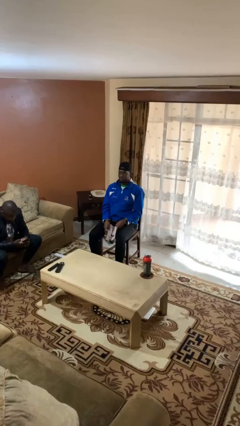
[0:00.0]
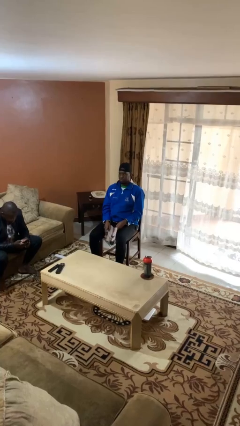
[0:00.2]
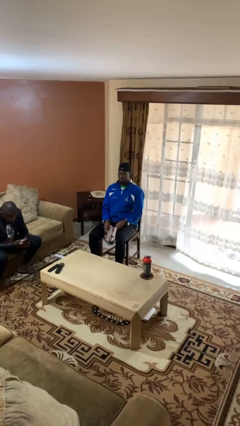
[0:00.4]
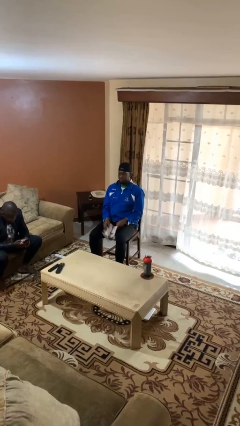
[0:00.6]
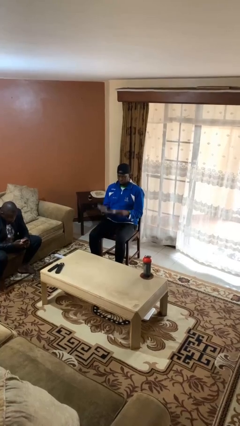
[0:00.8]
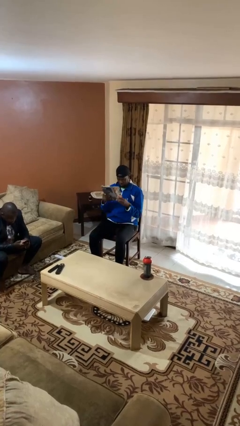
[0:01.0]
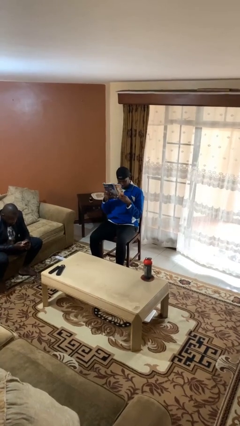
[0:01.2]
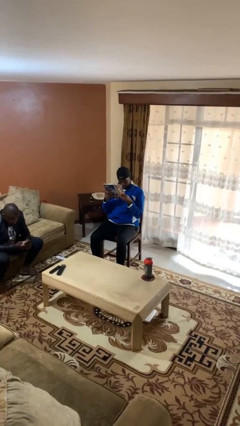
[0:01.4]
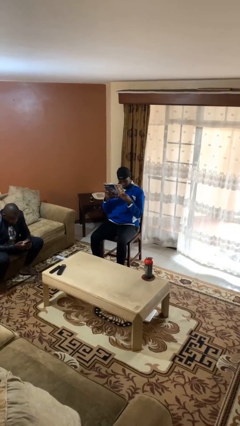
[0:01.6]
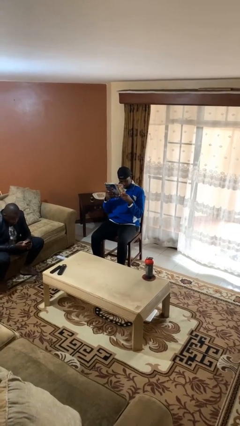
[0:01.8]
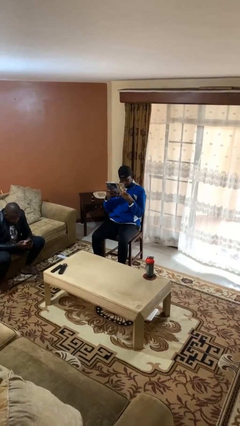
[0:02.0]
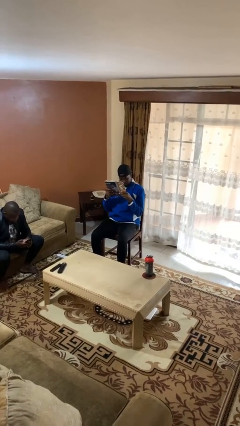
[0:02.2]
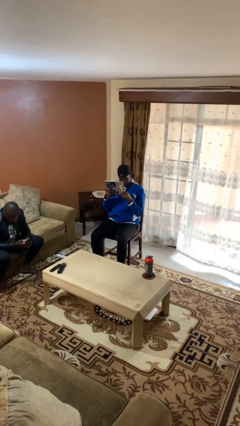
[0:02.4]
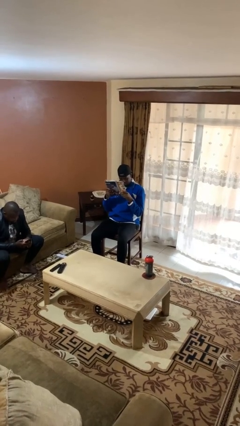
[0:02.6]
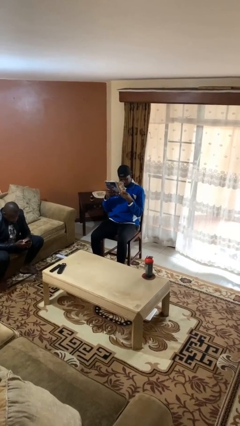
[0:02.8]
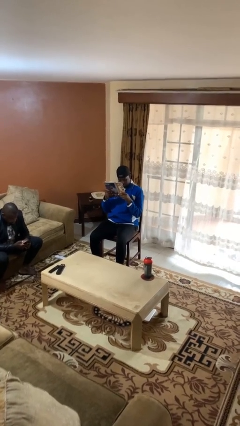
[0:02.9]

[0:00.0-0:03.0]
person reads document

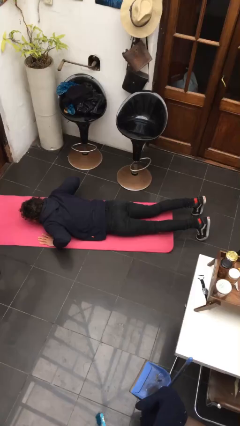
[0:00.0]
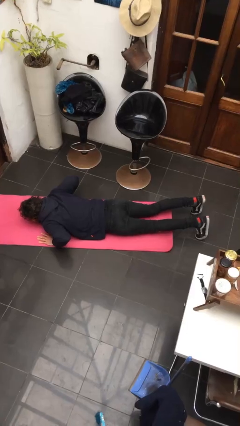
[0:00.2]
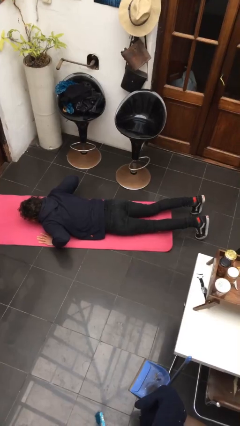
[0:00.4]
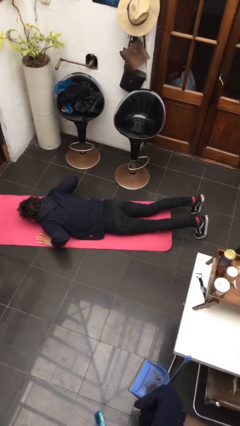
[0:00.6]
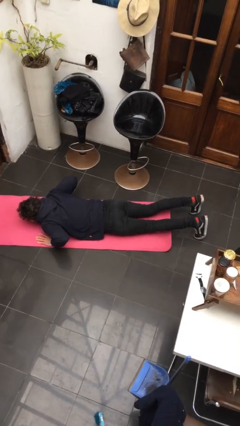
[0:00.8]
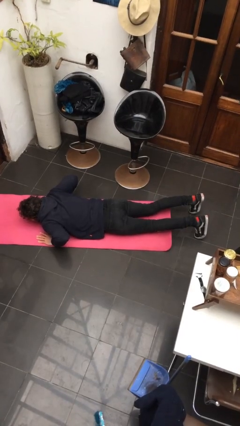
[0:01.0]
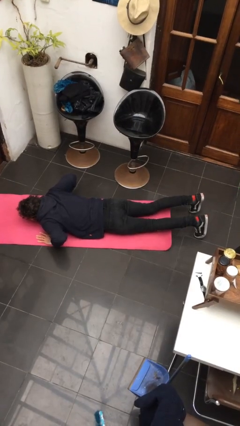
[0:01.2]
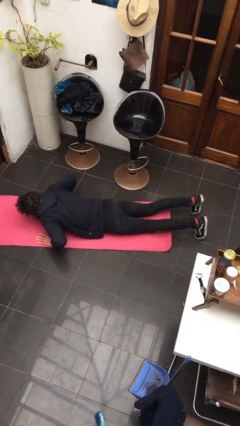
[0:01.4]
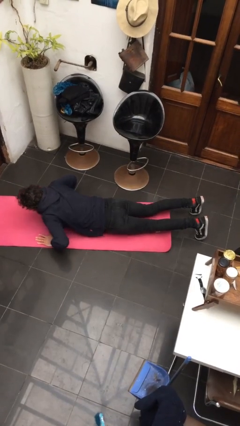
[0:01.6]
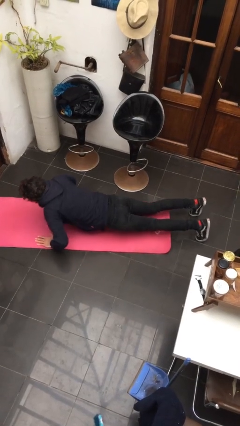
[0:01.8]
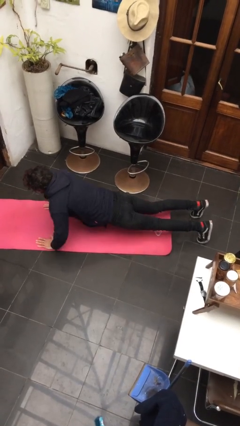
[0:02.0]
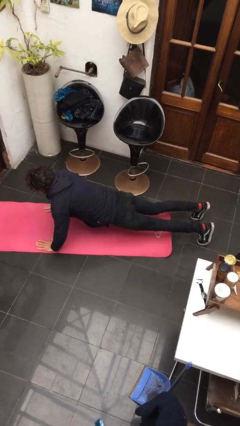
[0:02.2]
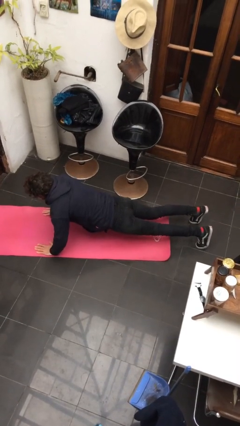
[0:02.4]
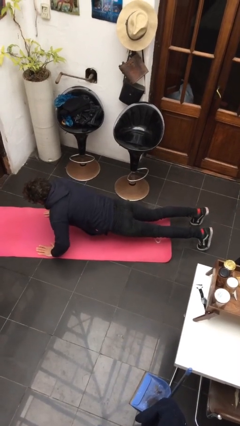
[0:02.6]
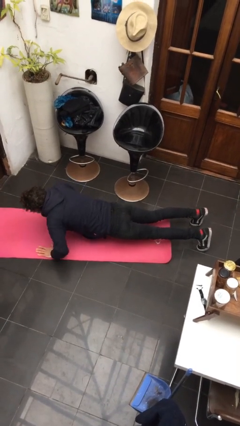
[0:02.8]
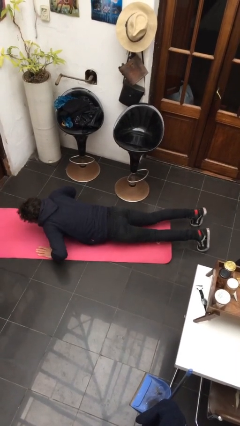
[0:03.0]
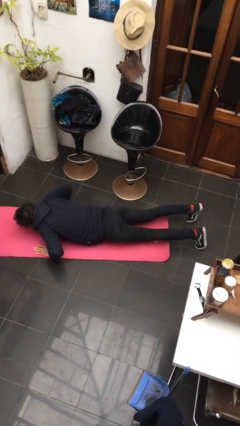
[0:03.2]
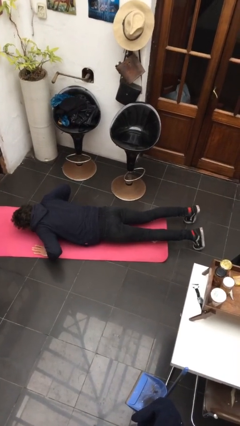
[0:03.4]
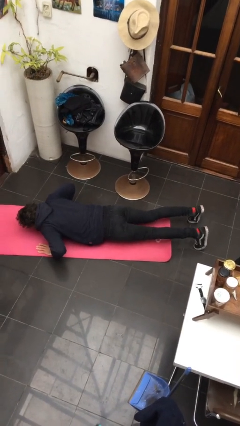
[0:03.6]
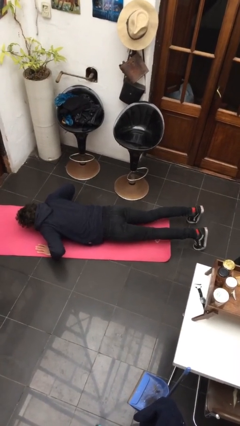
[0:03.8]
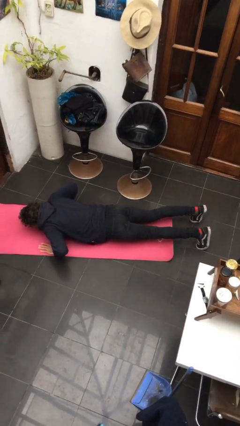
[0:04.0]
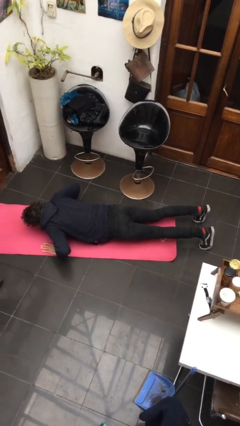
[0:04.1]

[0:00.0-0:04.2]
person exercises with pushup

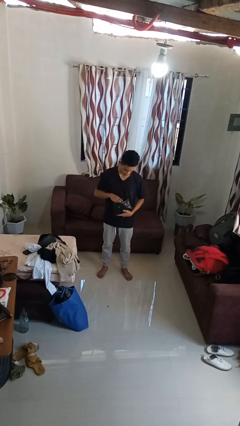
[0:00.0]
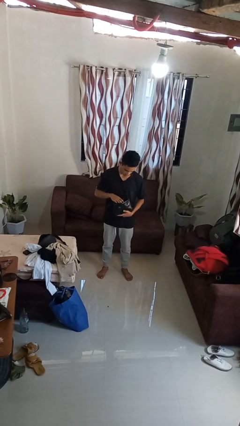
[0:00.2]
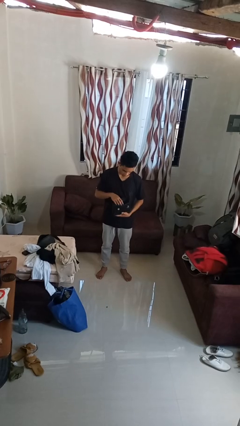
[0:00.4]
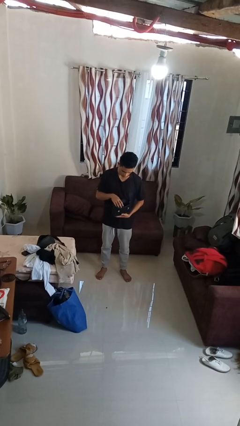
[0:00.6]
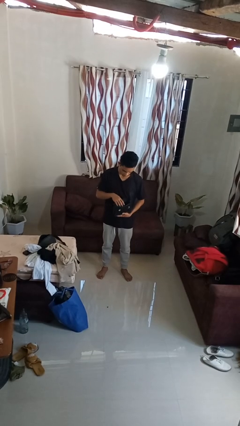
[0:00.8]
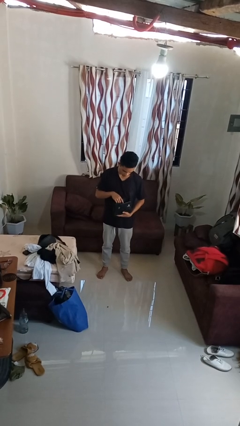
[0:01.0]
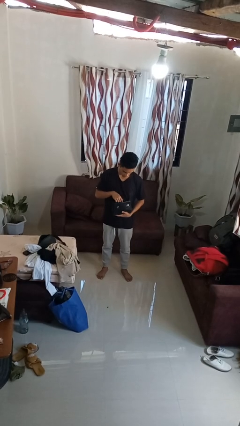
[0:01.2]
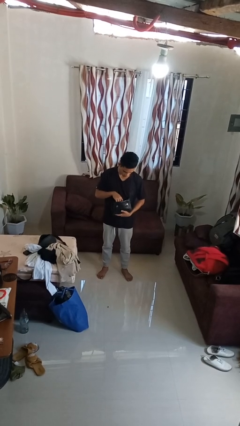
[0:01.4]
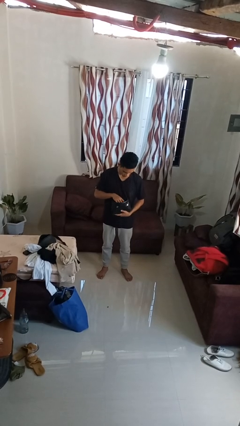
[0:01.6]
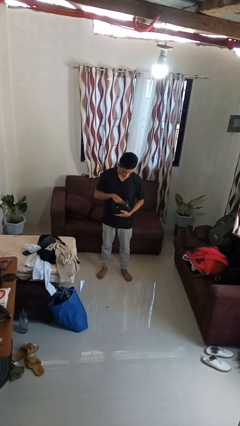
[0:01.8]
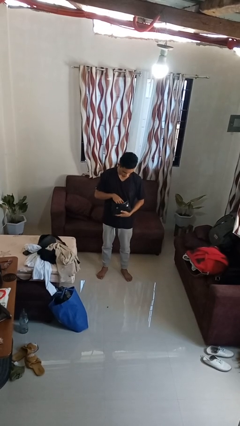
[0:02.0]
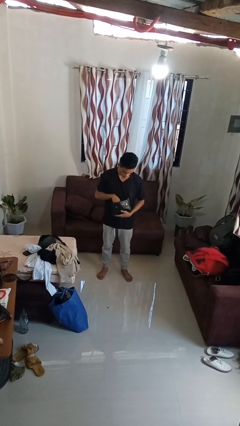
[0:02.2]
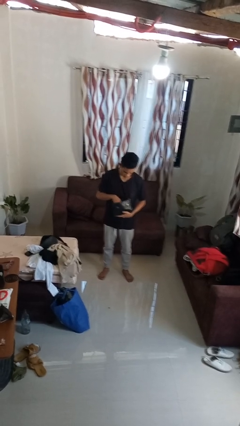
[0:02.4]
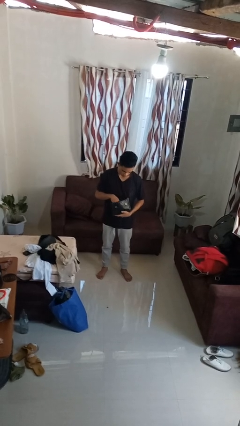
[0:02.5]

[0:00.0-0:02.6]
person searches in purse

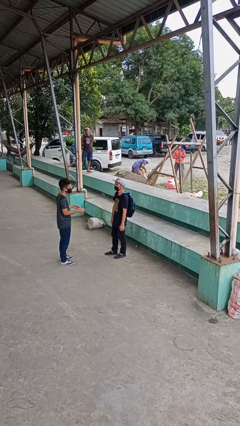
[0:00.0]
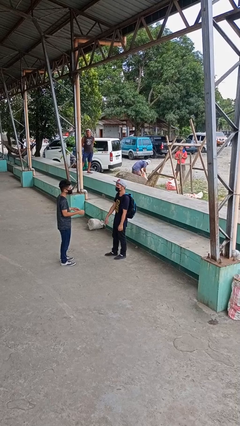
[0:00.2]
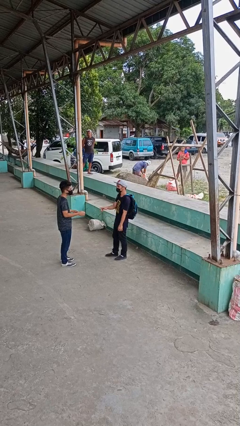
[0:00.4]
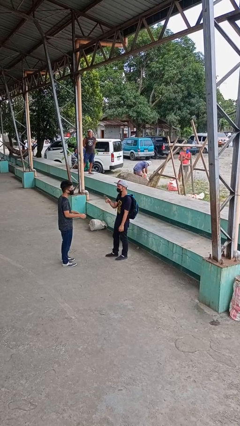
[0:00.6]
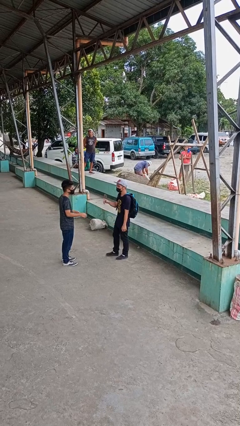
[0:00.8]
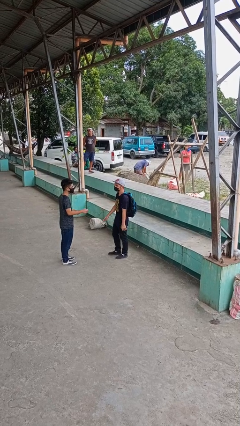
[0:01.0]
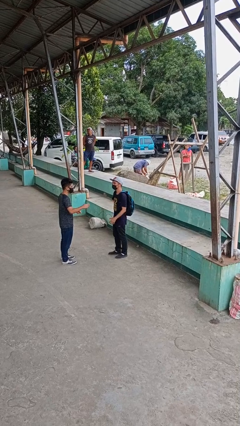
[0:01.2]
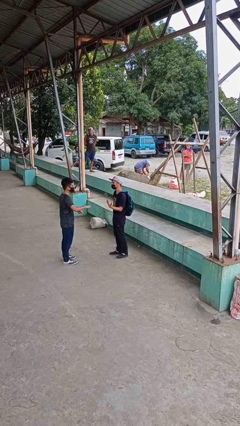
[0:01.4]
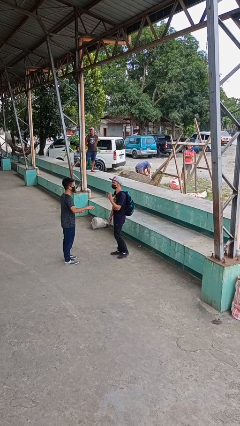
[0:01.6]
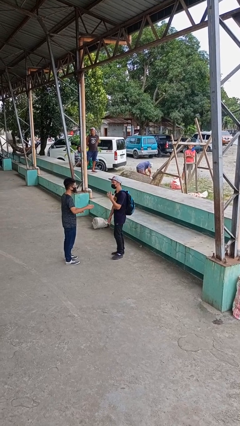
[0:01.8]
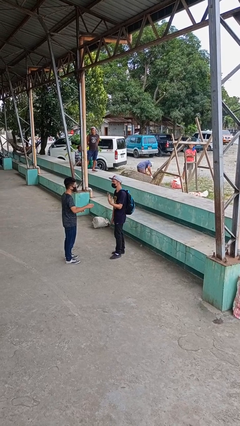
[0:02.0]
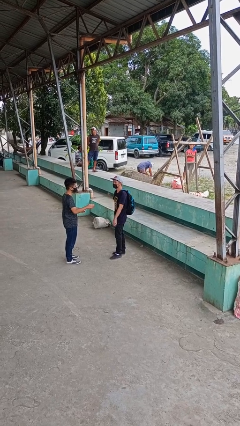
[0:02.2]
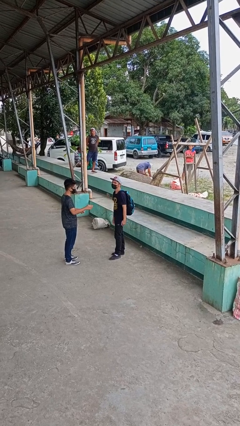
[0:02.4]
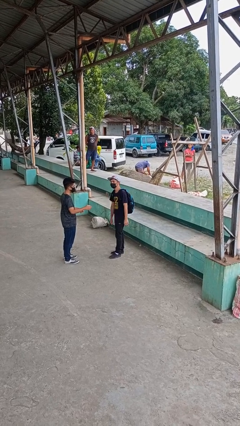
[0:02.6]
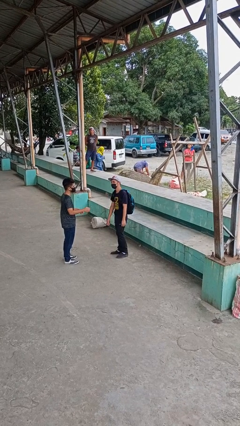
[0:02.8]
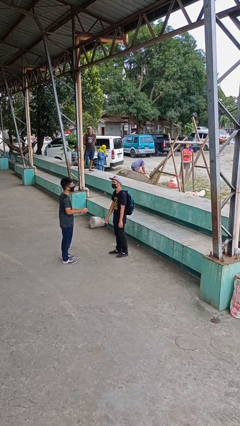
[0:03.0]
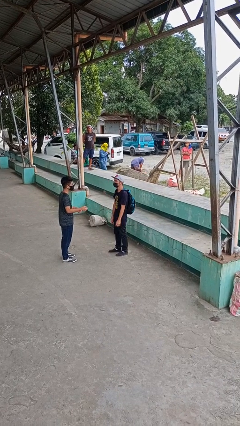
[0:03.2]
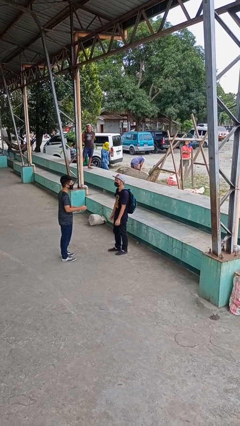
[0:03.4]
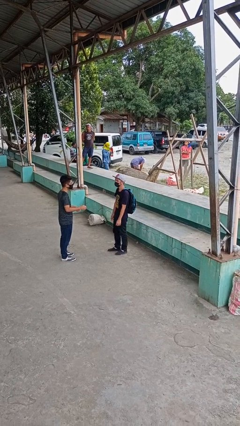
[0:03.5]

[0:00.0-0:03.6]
person talks to person

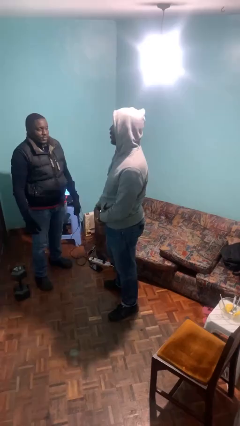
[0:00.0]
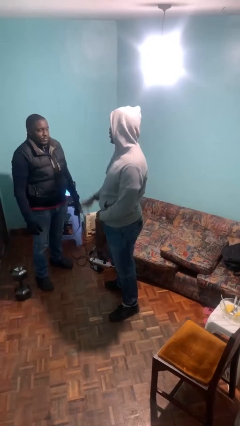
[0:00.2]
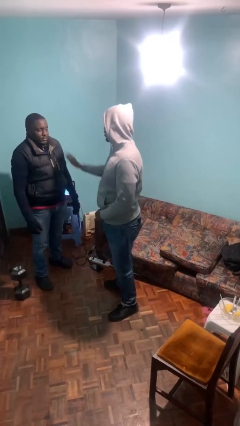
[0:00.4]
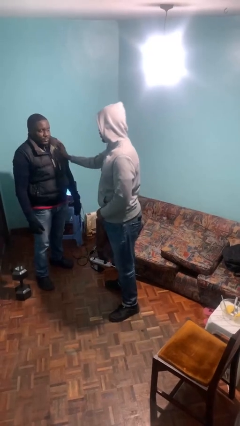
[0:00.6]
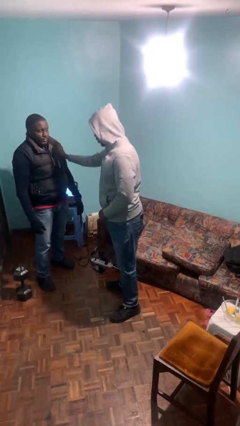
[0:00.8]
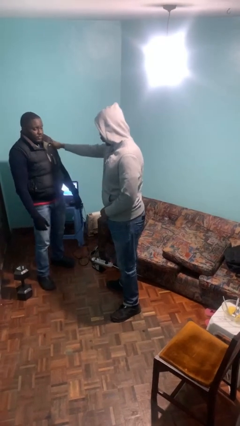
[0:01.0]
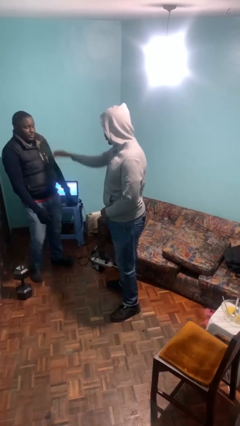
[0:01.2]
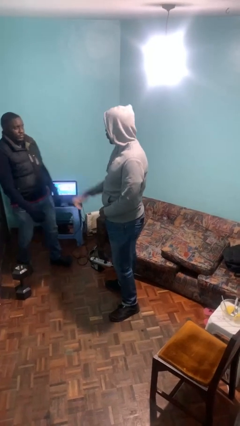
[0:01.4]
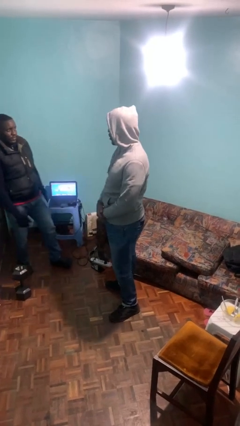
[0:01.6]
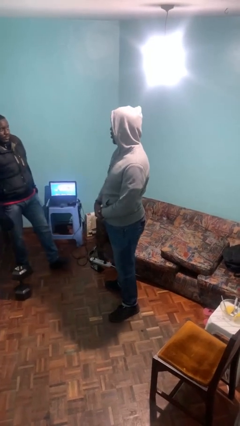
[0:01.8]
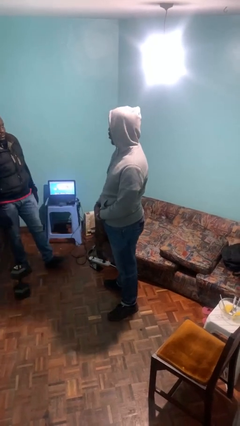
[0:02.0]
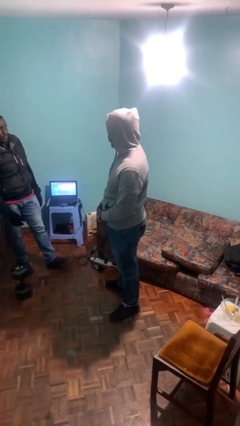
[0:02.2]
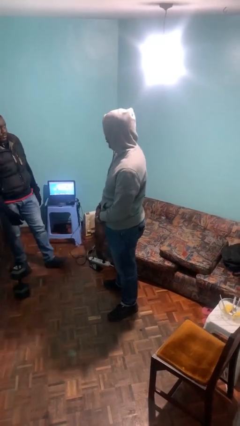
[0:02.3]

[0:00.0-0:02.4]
person shoves person

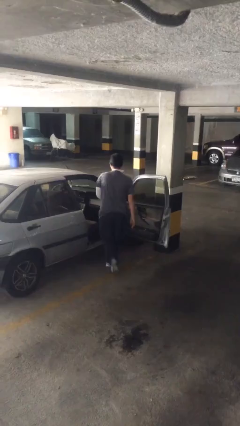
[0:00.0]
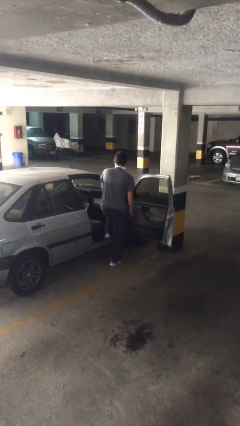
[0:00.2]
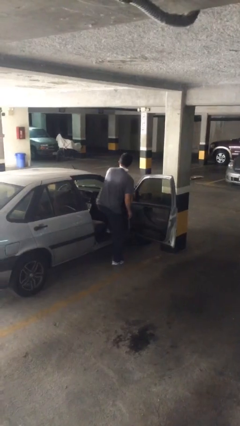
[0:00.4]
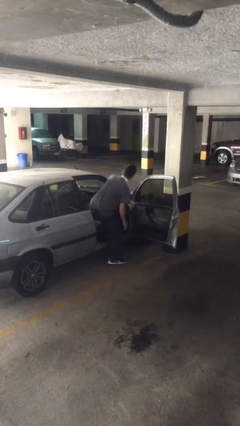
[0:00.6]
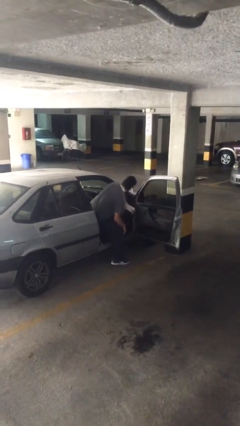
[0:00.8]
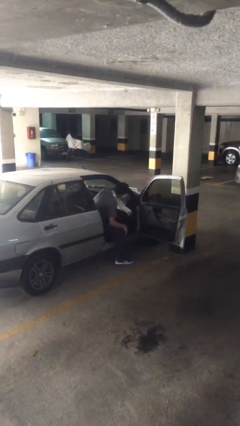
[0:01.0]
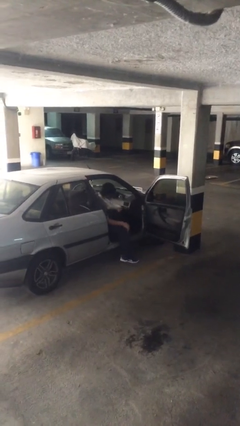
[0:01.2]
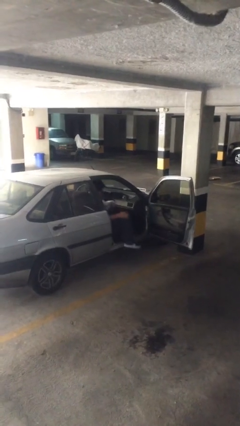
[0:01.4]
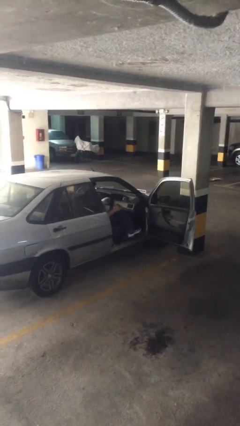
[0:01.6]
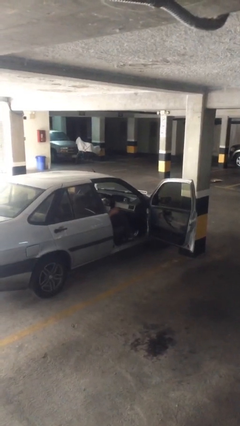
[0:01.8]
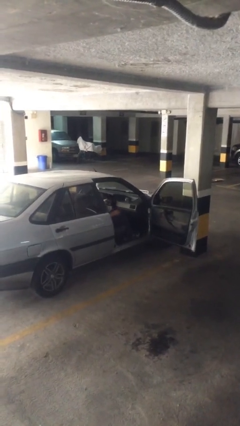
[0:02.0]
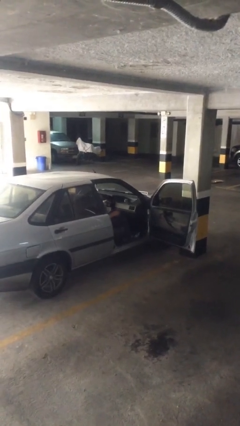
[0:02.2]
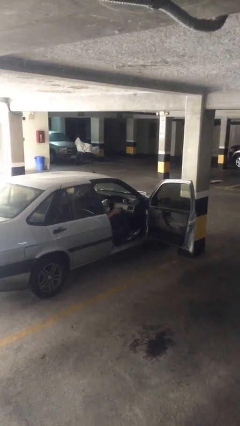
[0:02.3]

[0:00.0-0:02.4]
person enters car
